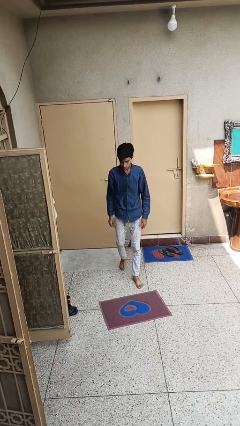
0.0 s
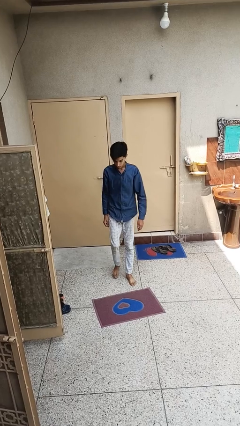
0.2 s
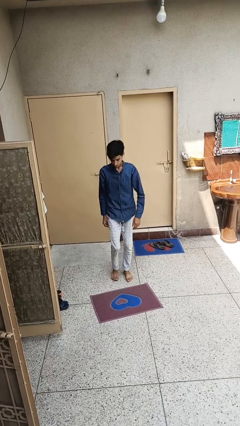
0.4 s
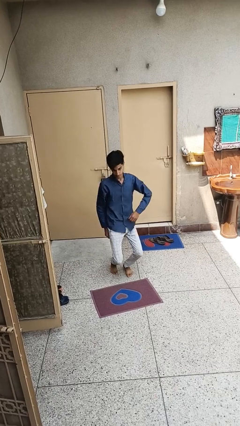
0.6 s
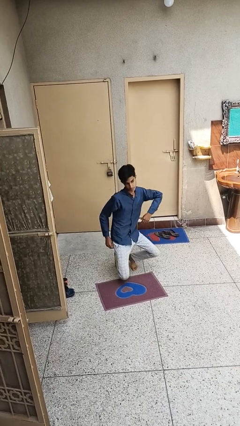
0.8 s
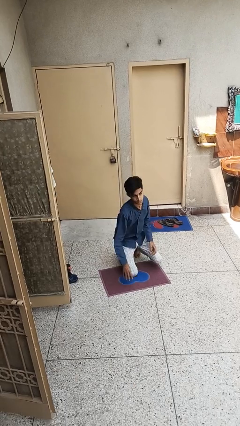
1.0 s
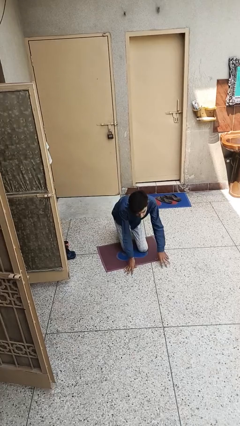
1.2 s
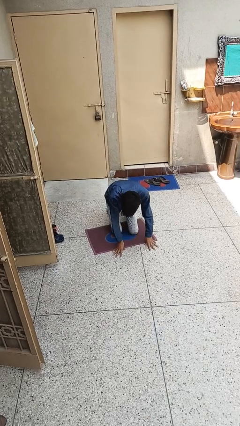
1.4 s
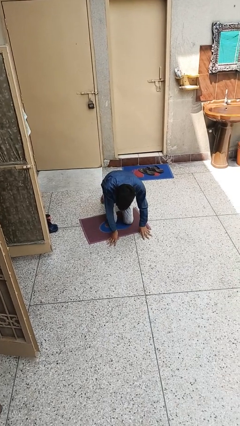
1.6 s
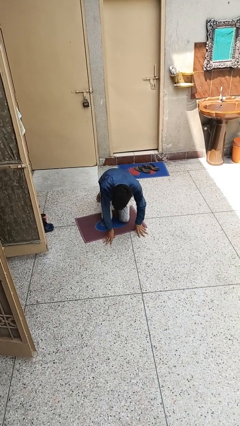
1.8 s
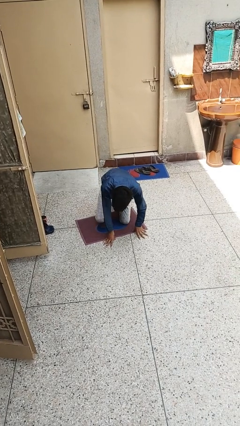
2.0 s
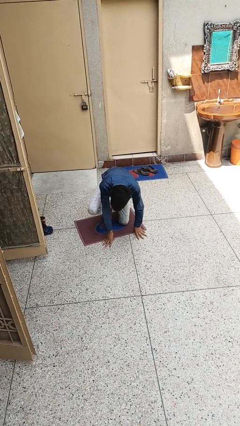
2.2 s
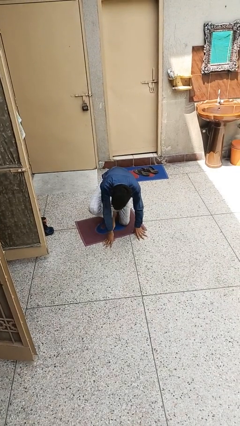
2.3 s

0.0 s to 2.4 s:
person trips on object on floor

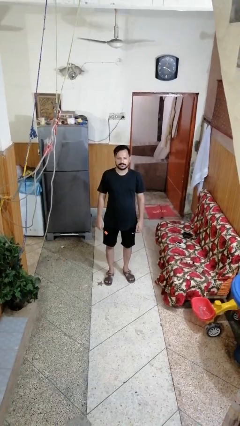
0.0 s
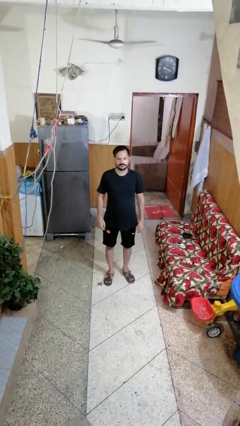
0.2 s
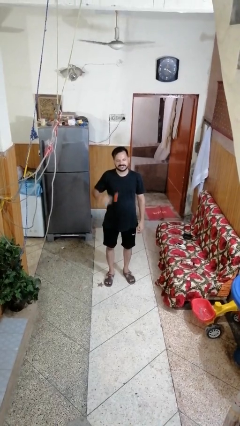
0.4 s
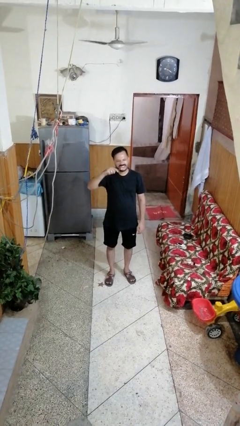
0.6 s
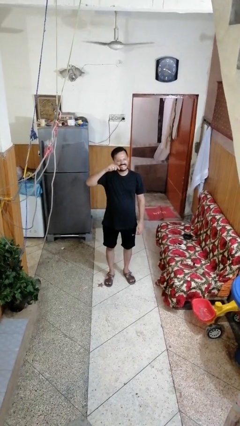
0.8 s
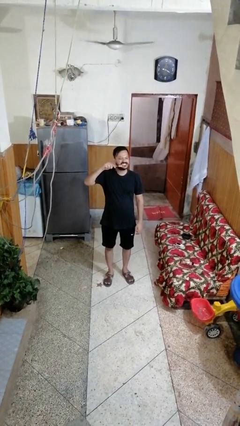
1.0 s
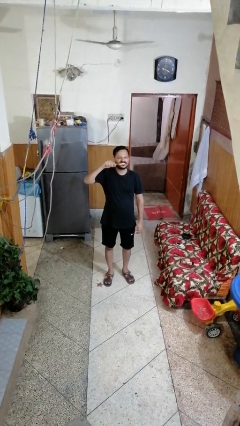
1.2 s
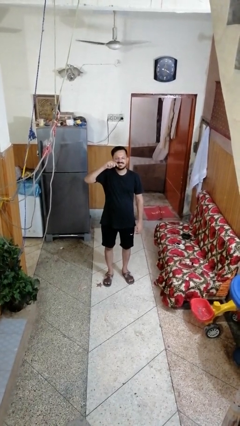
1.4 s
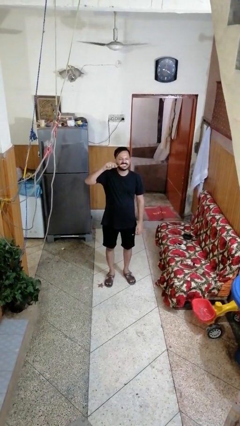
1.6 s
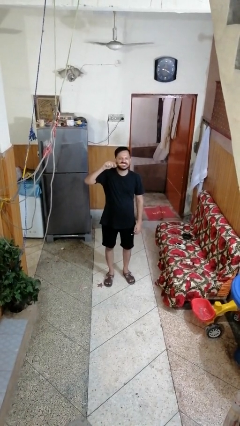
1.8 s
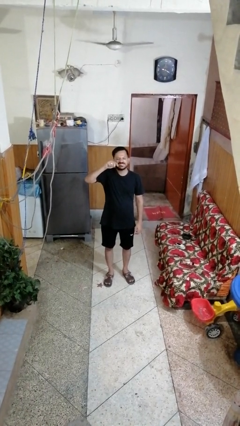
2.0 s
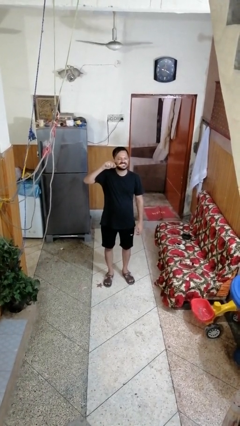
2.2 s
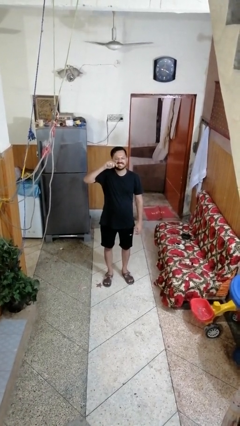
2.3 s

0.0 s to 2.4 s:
person brushes teeth

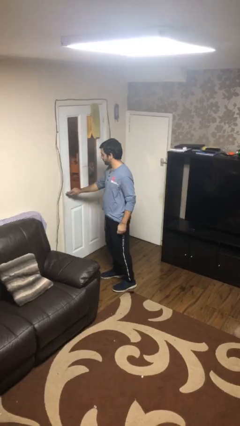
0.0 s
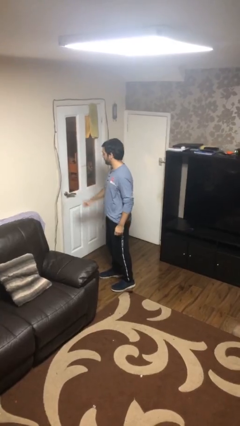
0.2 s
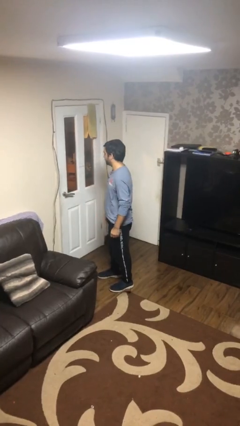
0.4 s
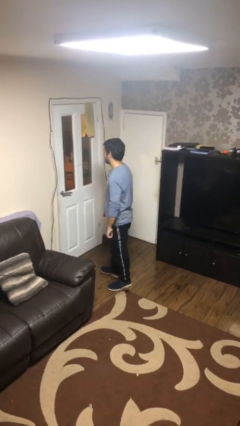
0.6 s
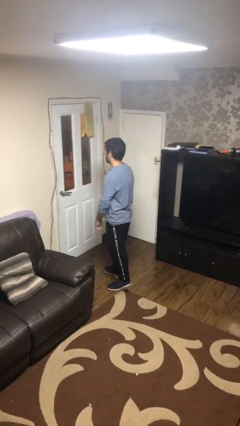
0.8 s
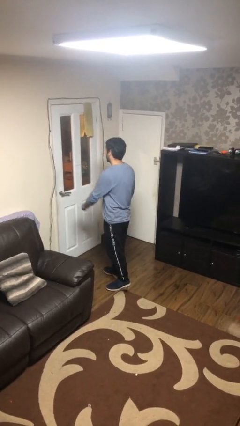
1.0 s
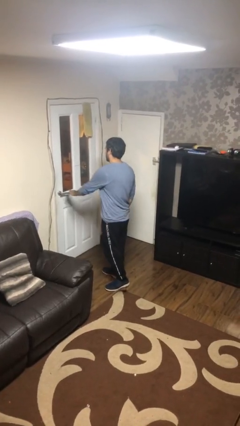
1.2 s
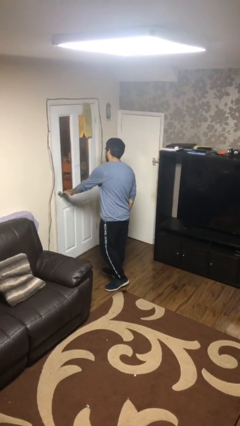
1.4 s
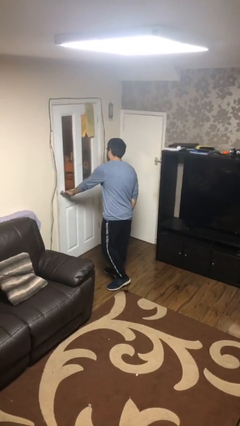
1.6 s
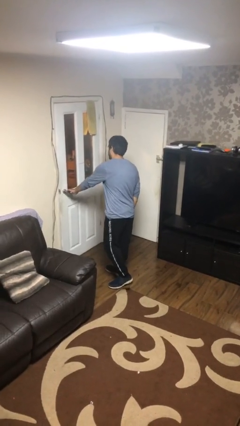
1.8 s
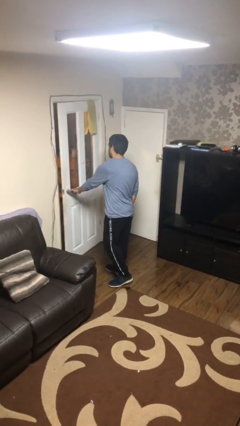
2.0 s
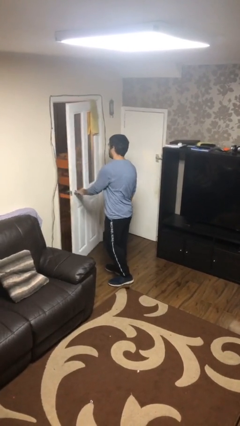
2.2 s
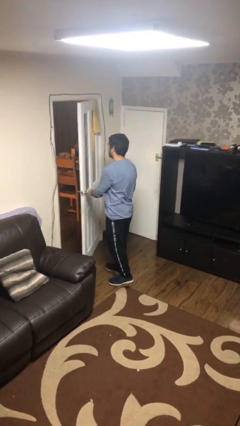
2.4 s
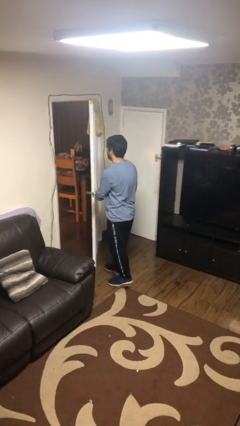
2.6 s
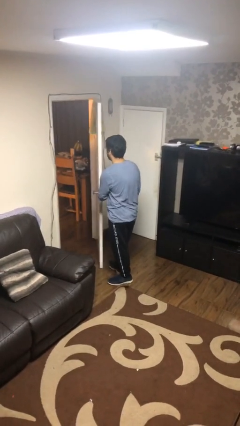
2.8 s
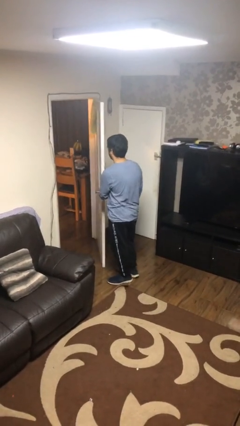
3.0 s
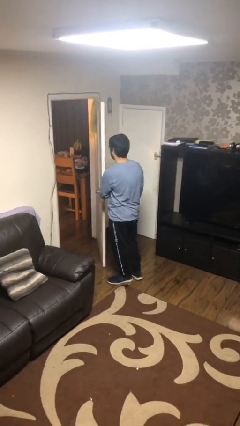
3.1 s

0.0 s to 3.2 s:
person opens facility door

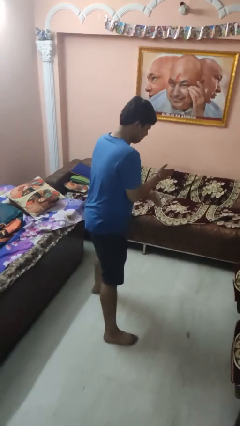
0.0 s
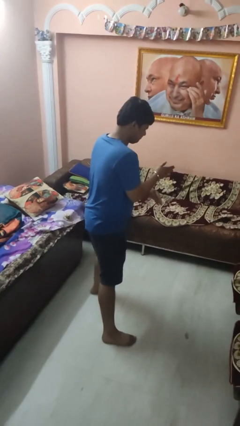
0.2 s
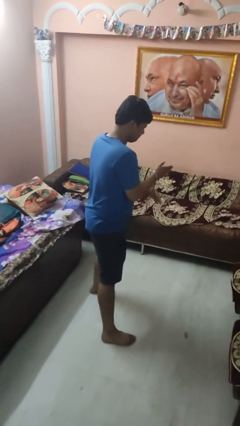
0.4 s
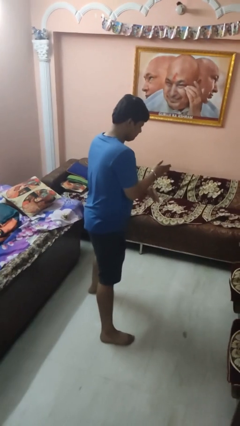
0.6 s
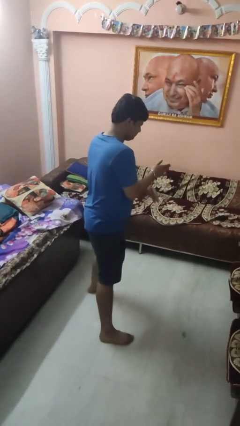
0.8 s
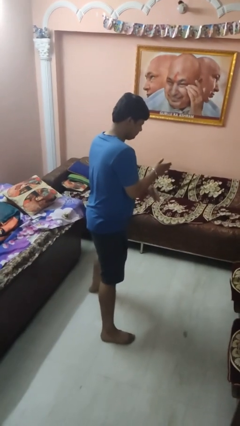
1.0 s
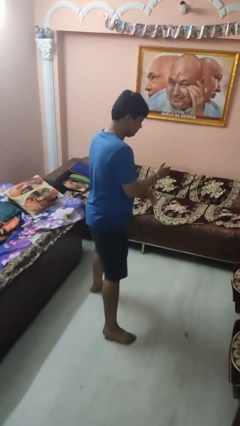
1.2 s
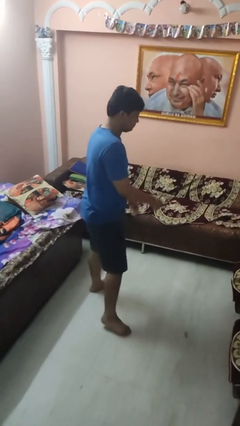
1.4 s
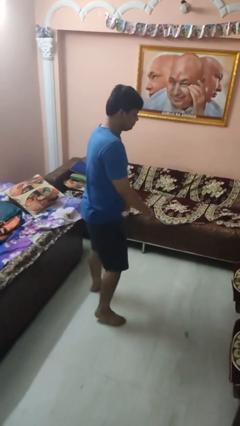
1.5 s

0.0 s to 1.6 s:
person karate chop

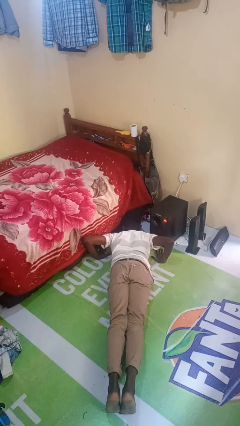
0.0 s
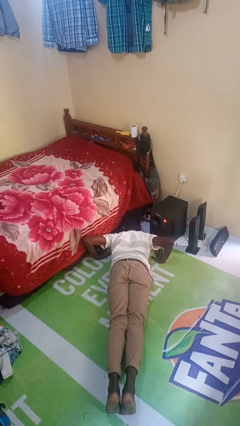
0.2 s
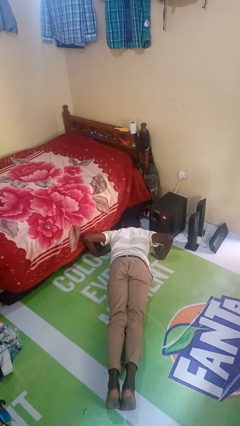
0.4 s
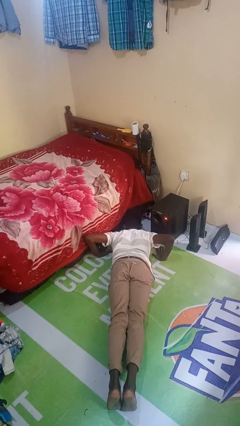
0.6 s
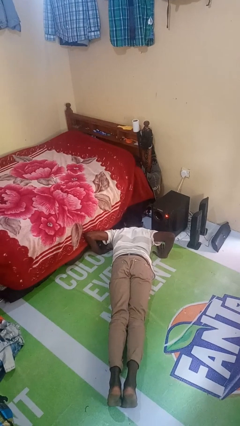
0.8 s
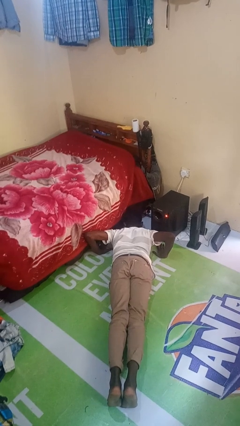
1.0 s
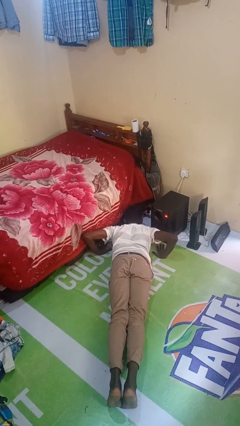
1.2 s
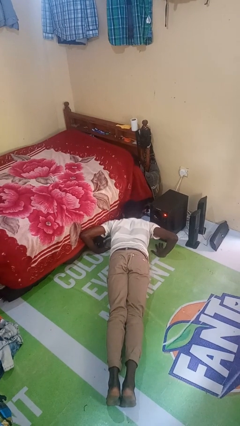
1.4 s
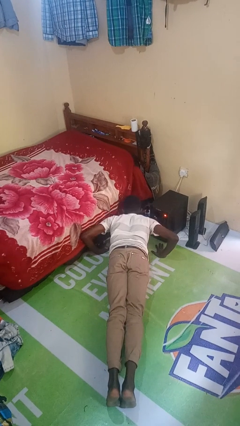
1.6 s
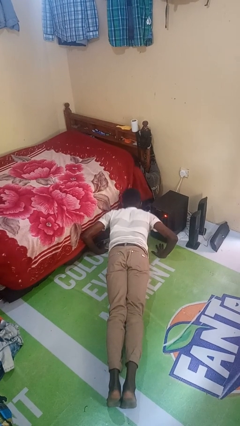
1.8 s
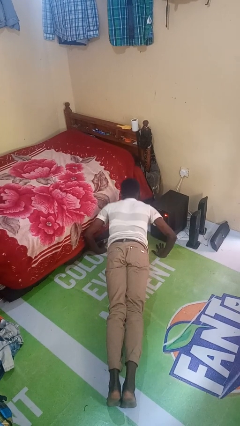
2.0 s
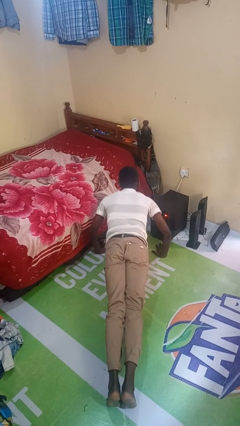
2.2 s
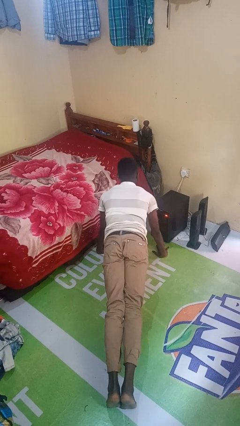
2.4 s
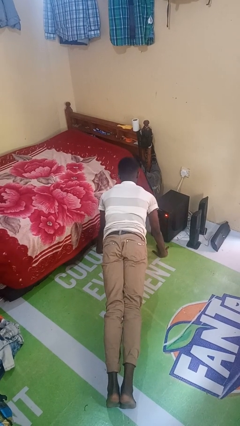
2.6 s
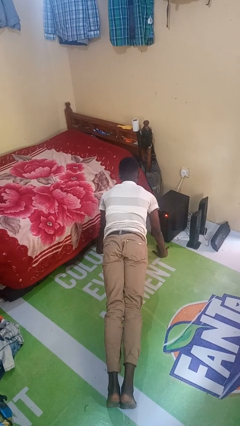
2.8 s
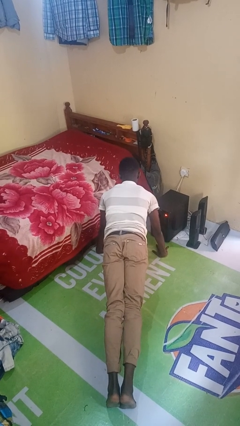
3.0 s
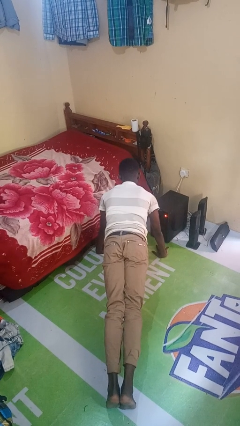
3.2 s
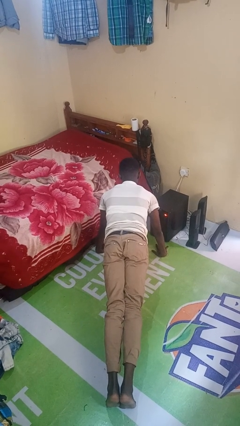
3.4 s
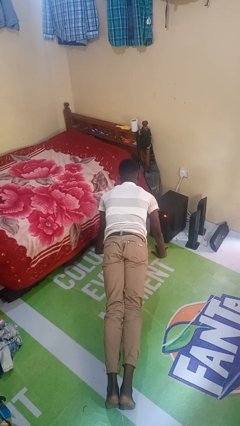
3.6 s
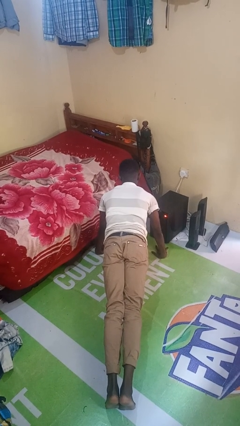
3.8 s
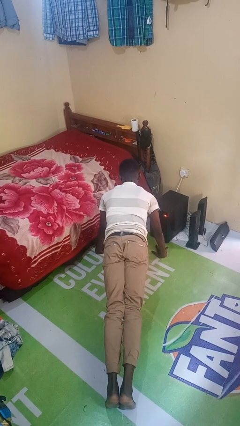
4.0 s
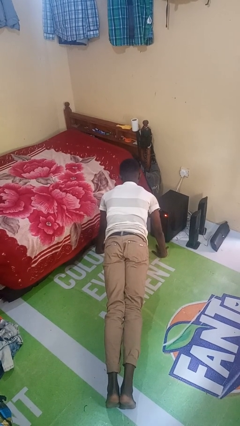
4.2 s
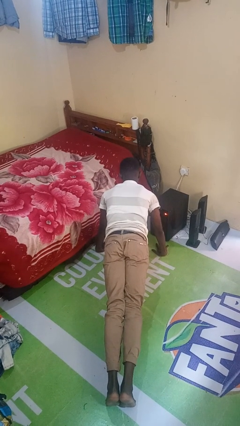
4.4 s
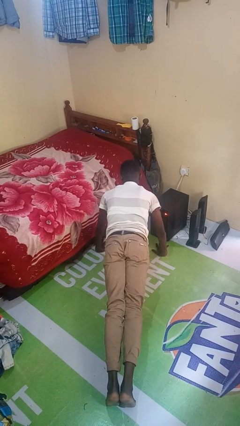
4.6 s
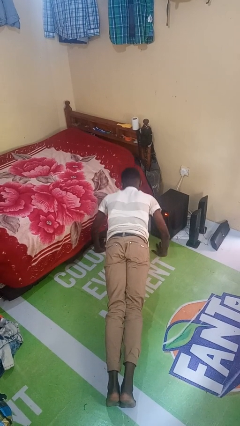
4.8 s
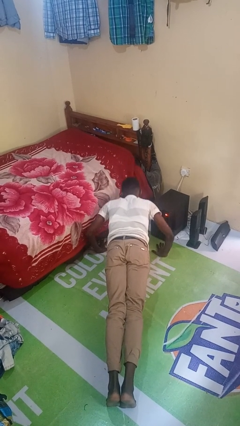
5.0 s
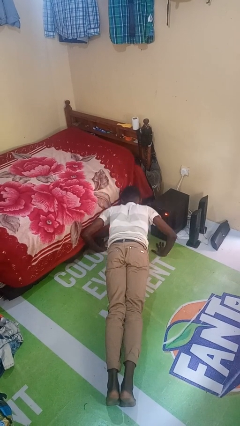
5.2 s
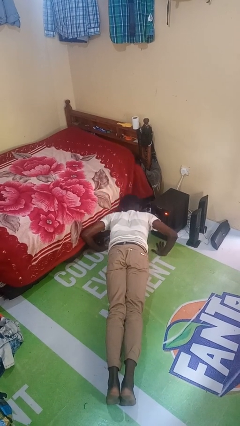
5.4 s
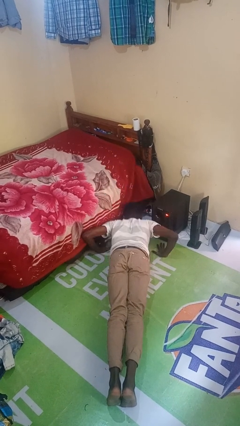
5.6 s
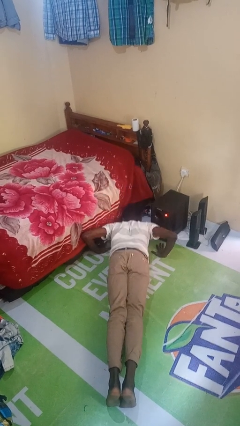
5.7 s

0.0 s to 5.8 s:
person exercises with pushup

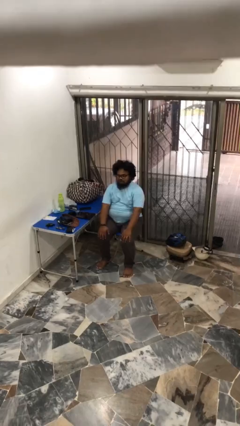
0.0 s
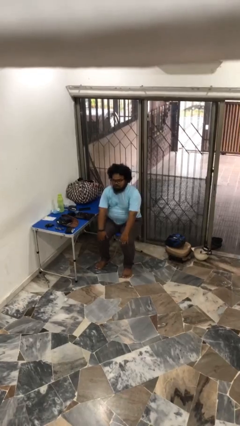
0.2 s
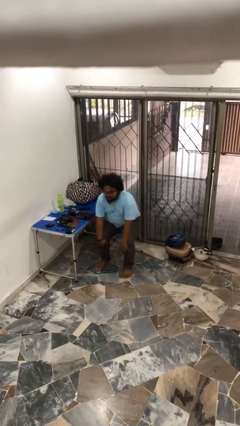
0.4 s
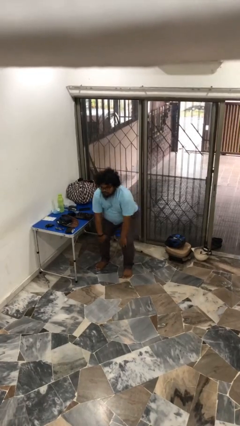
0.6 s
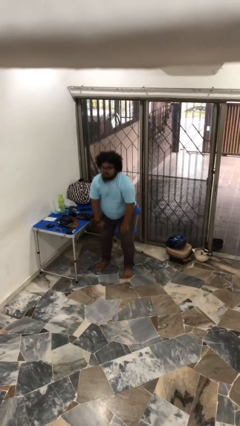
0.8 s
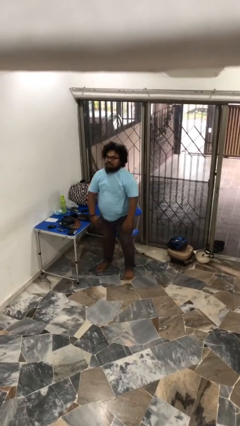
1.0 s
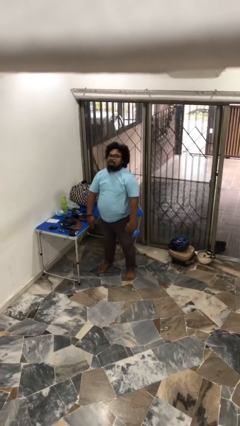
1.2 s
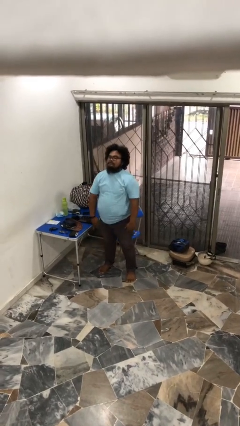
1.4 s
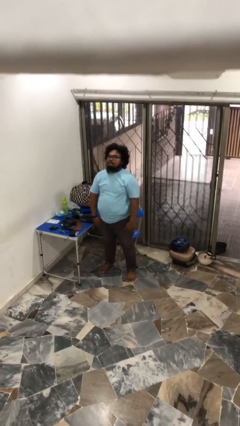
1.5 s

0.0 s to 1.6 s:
person stands up

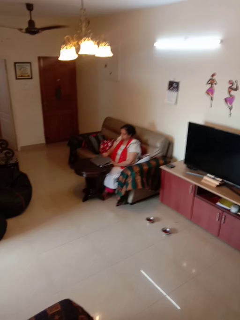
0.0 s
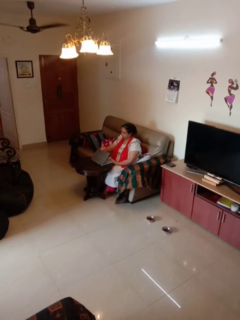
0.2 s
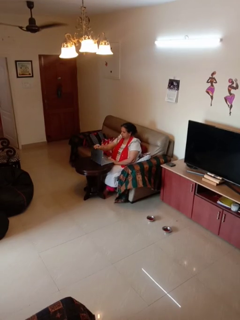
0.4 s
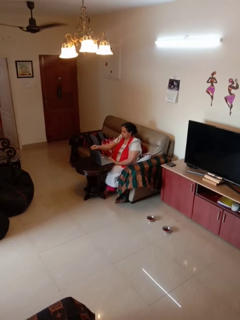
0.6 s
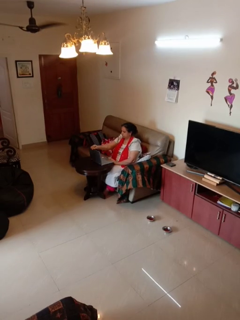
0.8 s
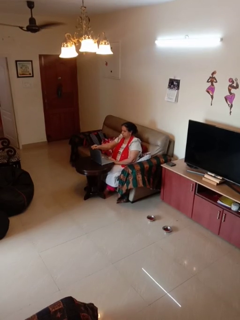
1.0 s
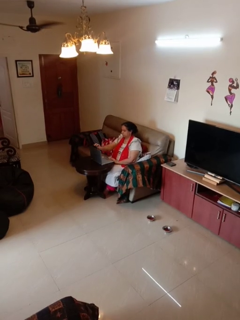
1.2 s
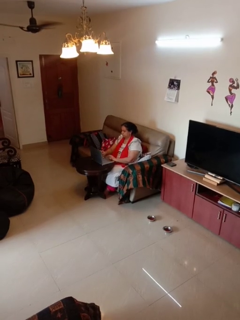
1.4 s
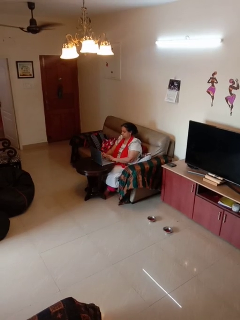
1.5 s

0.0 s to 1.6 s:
person opens laptop
